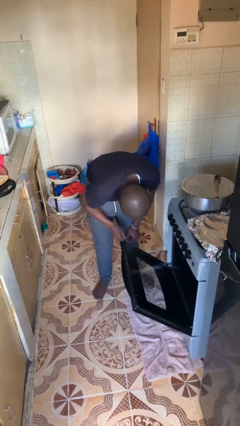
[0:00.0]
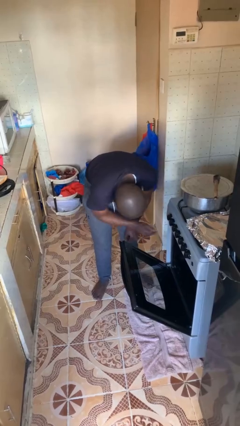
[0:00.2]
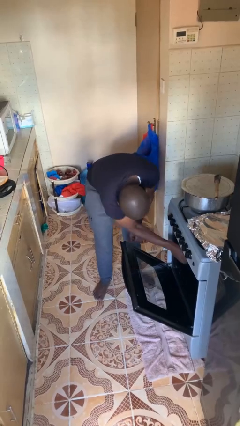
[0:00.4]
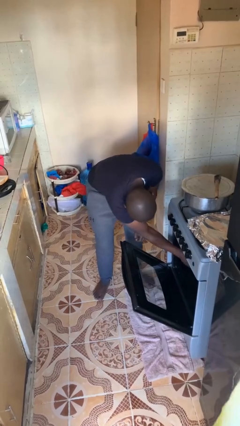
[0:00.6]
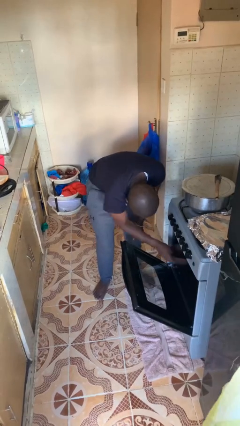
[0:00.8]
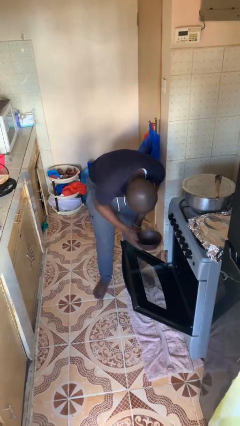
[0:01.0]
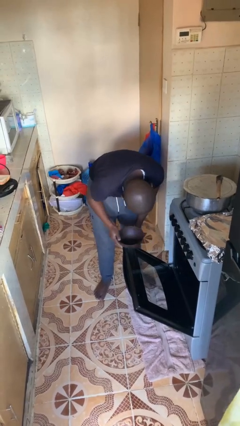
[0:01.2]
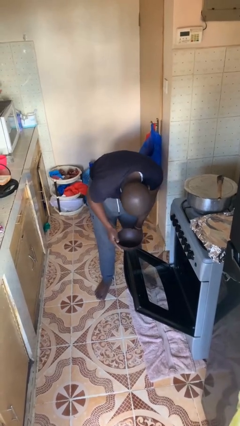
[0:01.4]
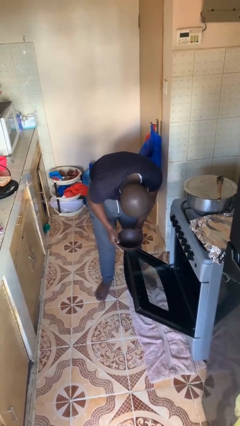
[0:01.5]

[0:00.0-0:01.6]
person takes object from oven

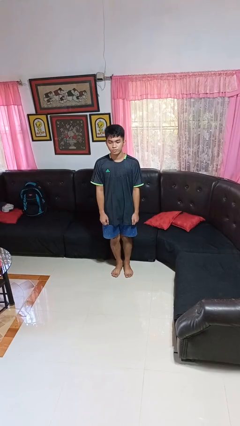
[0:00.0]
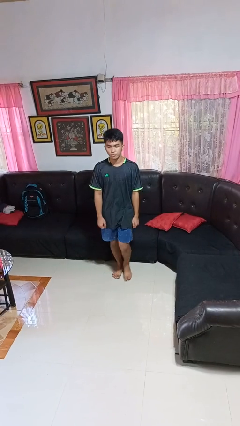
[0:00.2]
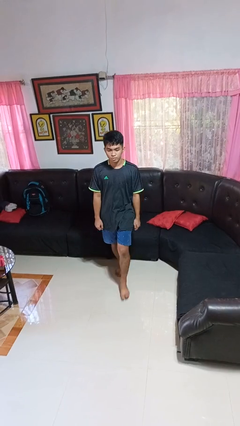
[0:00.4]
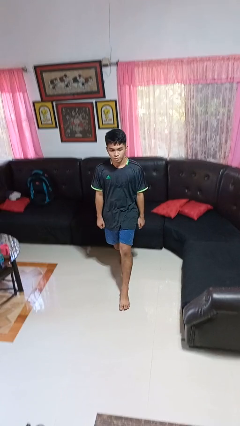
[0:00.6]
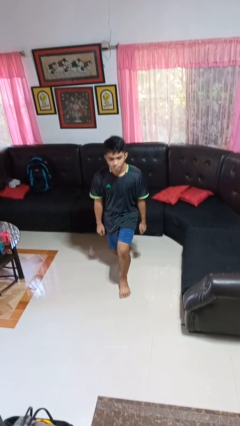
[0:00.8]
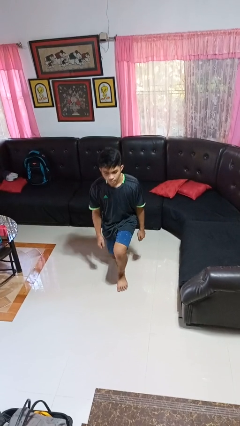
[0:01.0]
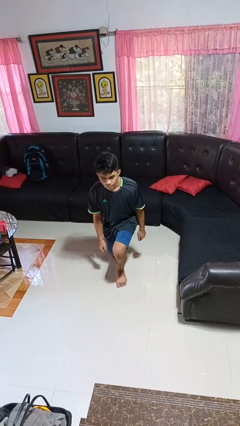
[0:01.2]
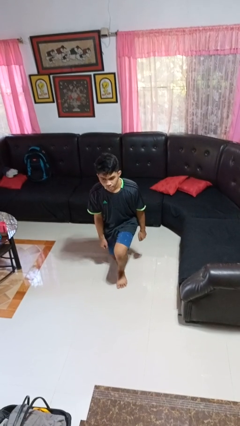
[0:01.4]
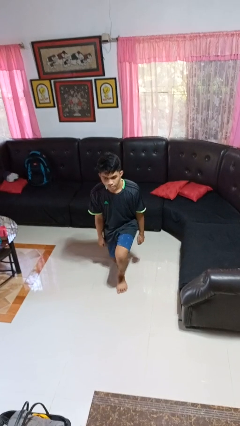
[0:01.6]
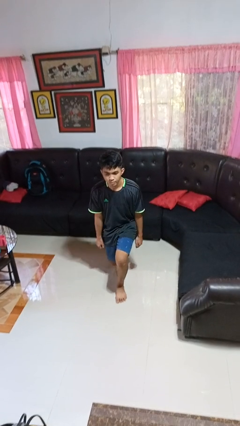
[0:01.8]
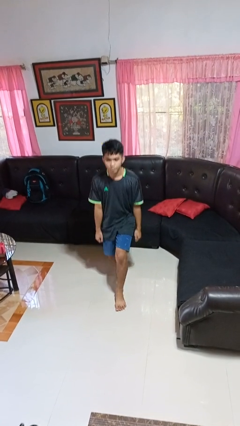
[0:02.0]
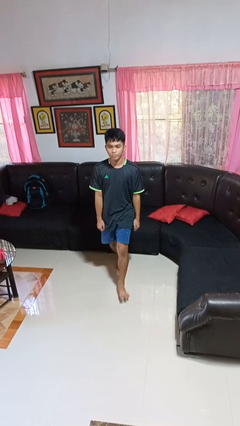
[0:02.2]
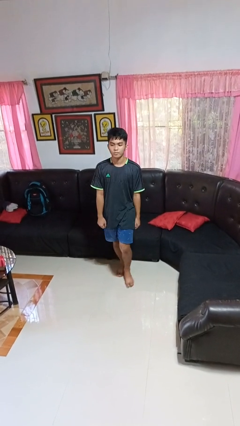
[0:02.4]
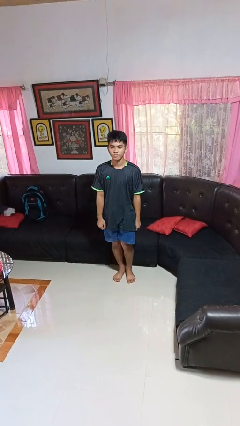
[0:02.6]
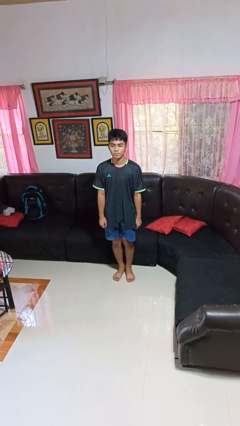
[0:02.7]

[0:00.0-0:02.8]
person exercises with lunges

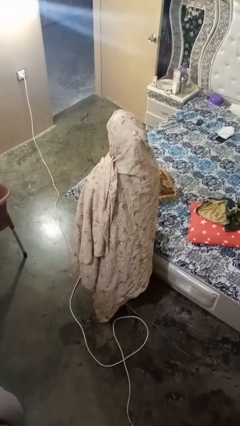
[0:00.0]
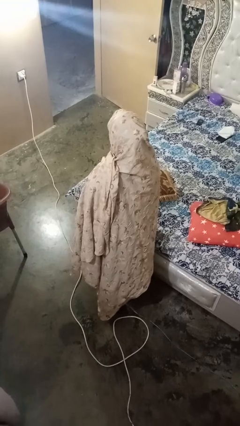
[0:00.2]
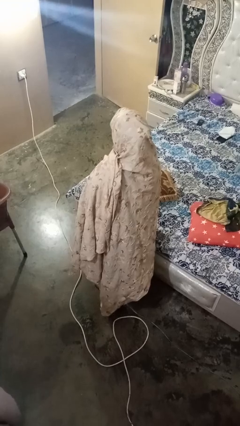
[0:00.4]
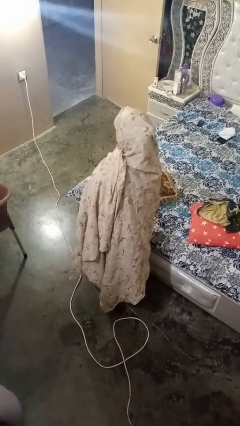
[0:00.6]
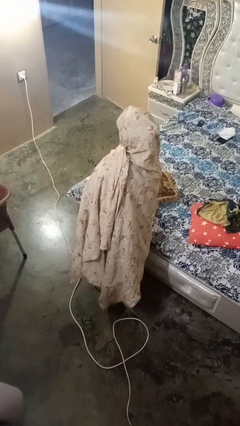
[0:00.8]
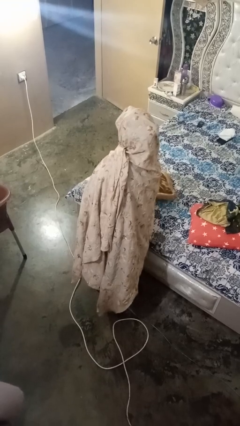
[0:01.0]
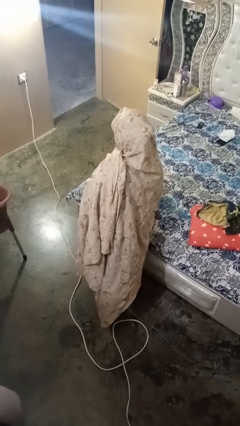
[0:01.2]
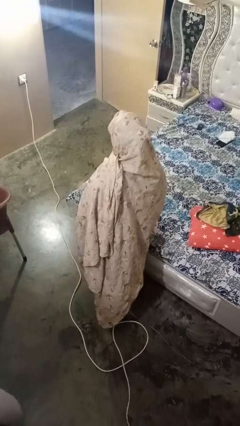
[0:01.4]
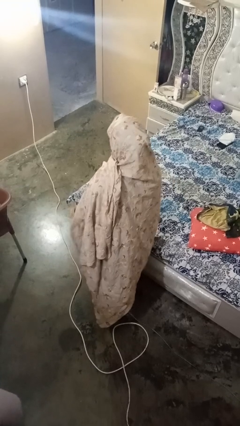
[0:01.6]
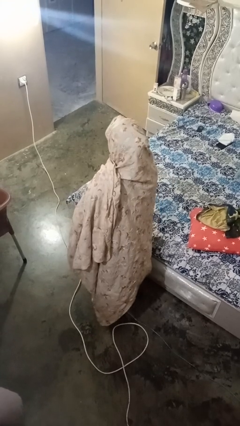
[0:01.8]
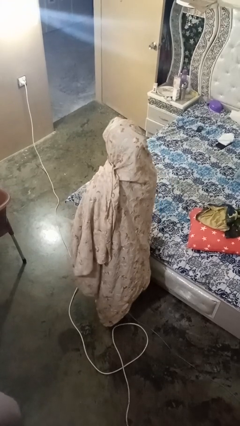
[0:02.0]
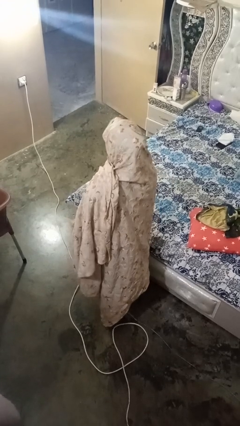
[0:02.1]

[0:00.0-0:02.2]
person picks up object from bed

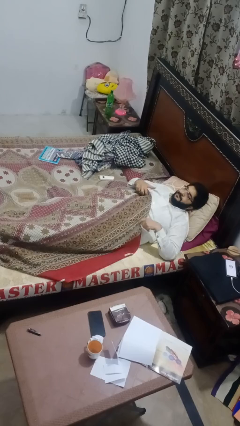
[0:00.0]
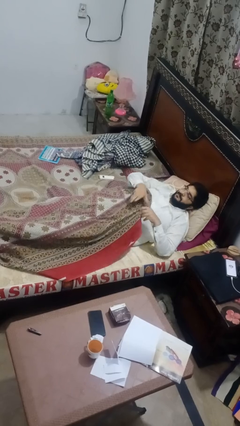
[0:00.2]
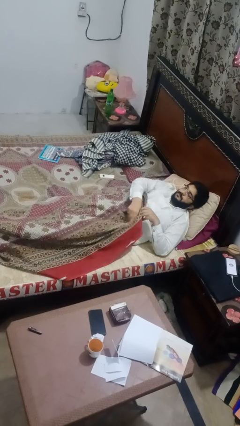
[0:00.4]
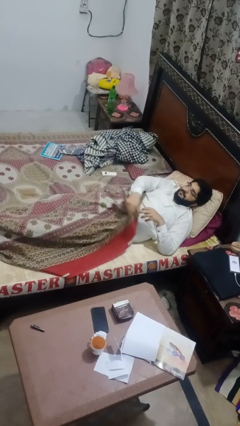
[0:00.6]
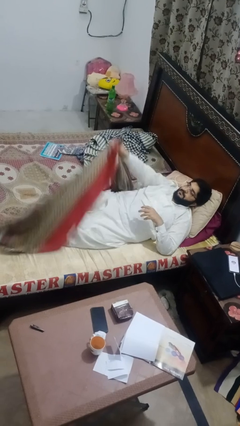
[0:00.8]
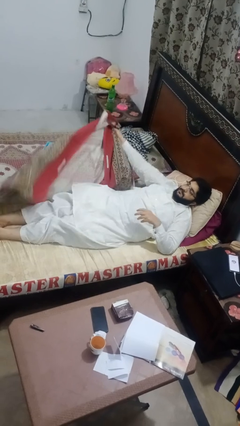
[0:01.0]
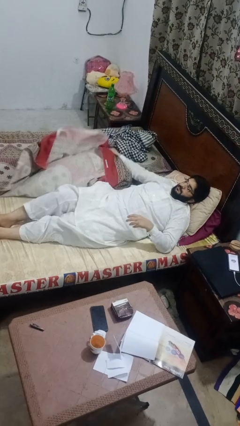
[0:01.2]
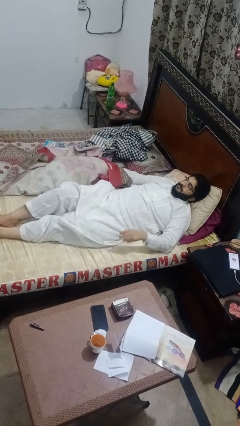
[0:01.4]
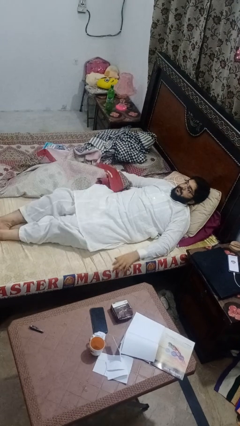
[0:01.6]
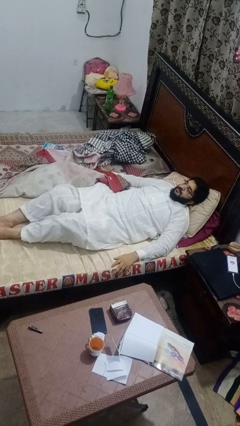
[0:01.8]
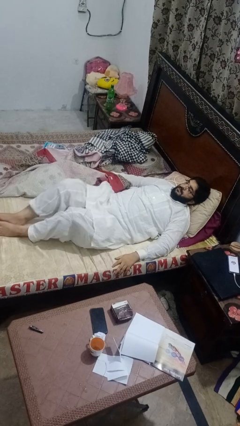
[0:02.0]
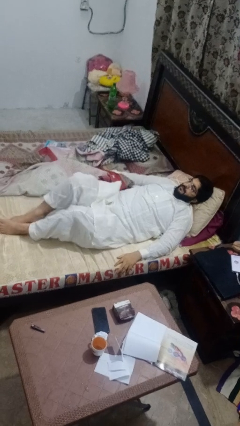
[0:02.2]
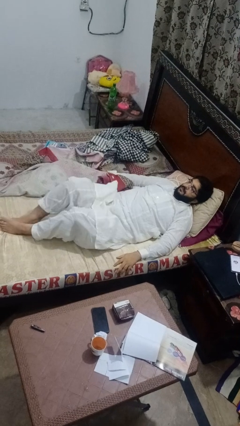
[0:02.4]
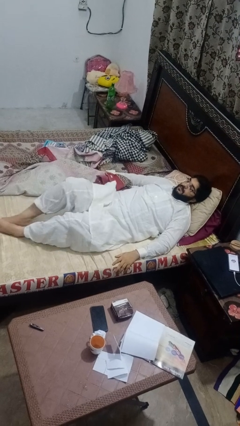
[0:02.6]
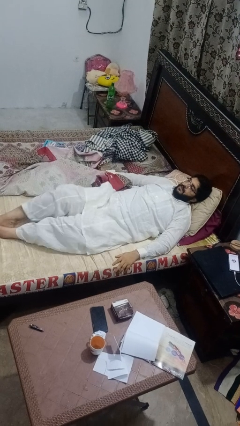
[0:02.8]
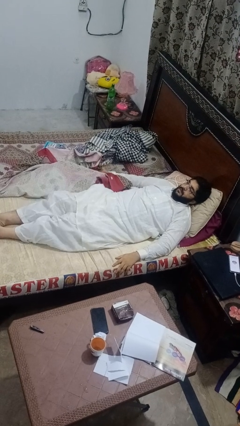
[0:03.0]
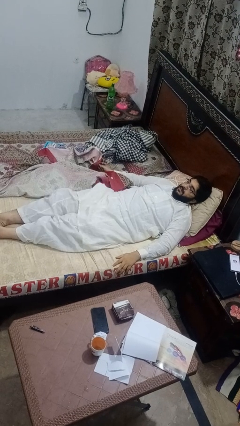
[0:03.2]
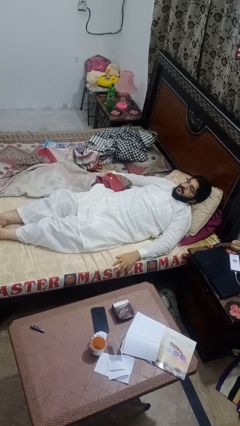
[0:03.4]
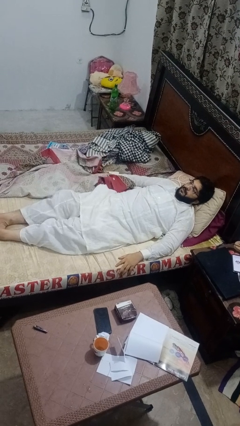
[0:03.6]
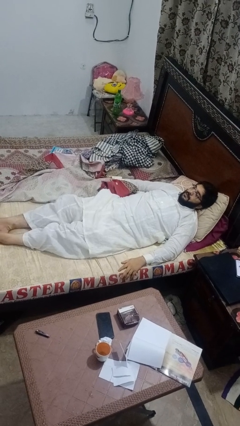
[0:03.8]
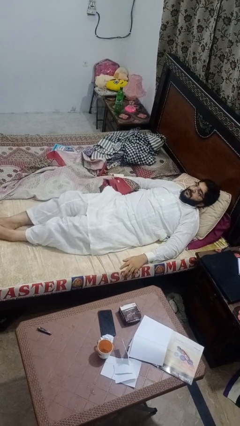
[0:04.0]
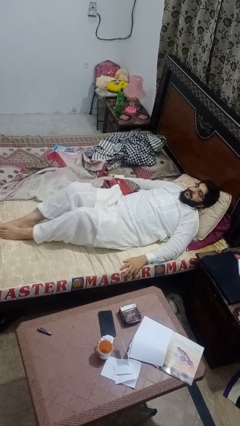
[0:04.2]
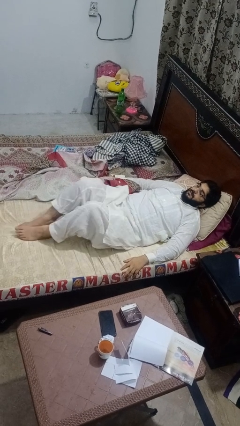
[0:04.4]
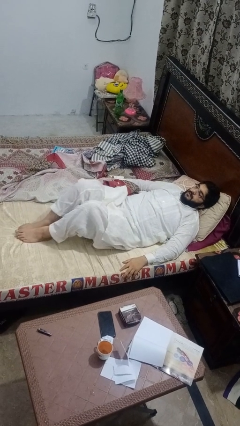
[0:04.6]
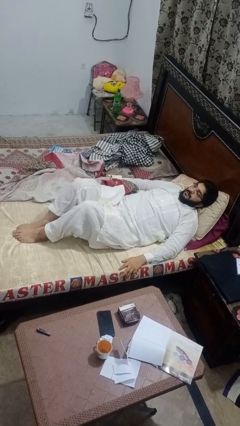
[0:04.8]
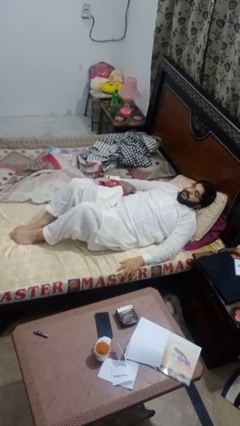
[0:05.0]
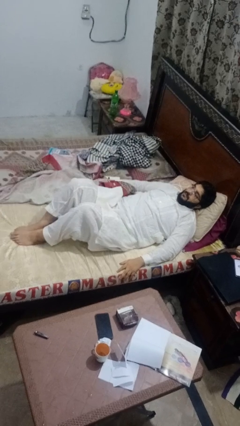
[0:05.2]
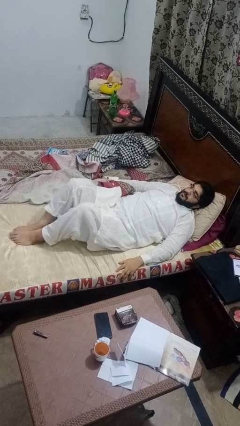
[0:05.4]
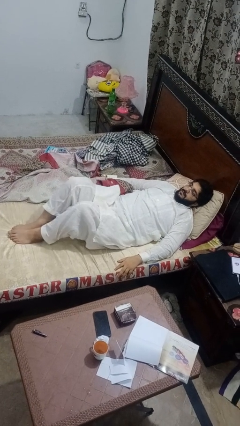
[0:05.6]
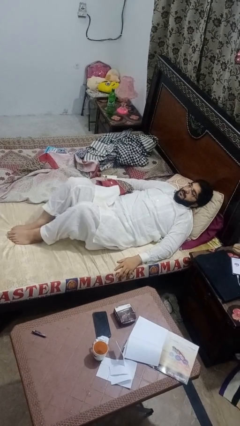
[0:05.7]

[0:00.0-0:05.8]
person uncovers with bedsheets

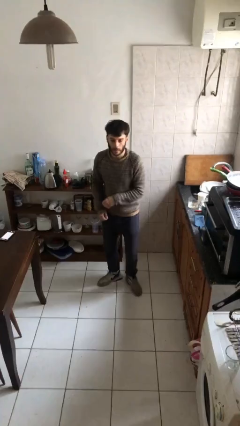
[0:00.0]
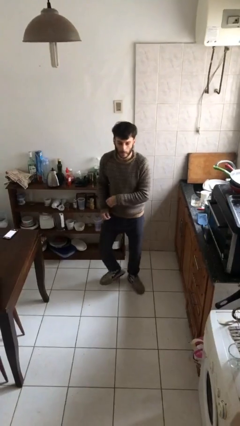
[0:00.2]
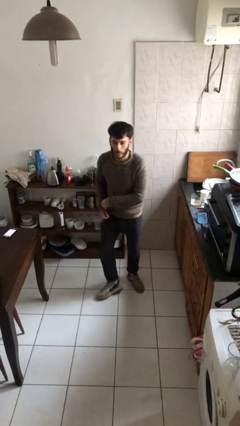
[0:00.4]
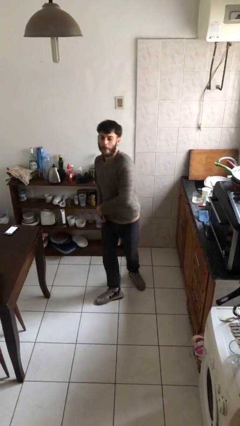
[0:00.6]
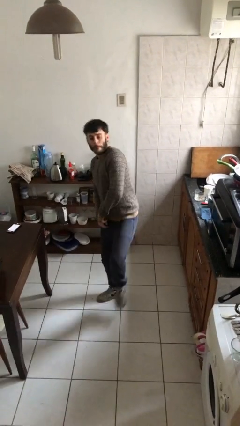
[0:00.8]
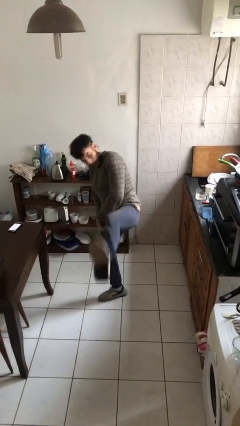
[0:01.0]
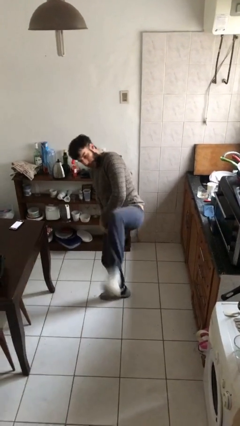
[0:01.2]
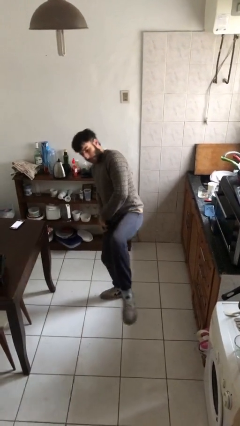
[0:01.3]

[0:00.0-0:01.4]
person karate kicks

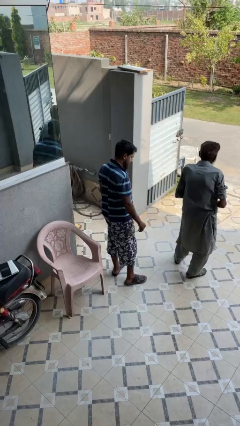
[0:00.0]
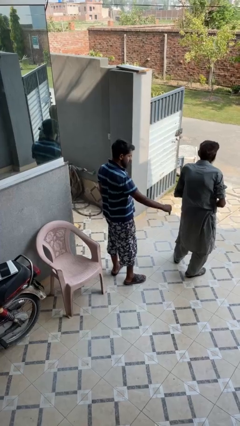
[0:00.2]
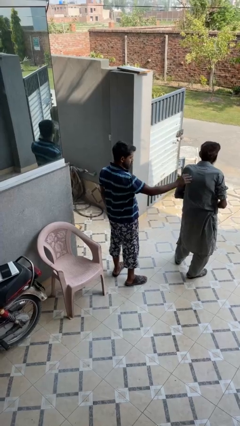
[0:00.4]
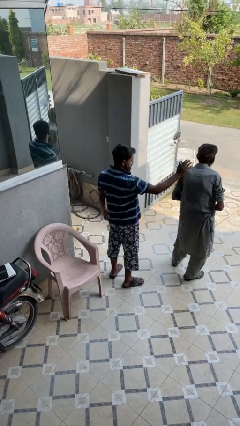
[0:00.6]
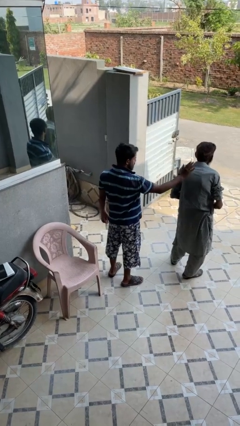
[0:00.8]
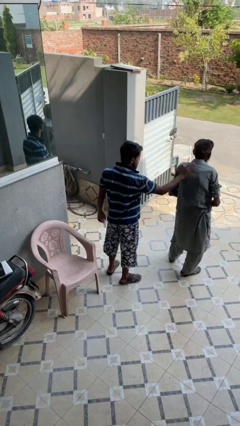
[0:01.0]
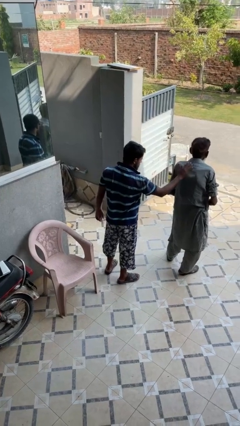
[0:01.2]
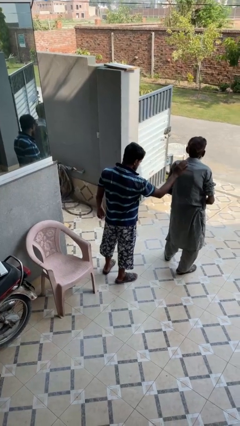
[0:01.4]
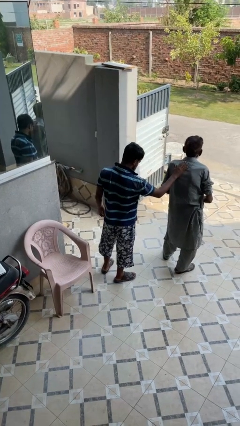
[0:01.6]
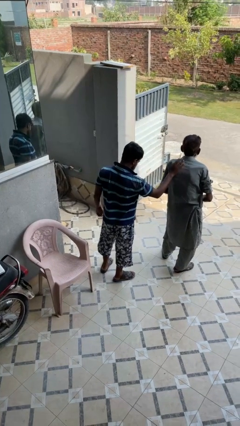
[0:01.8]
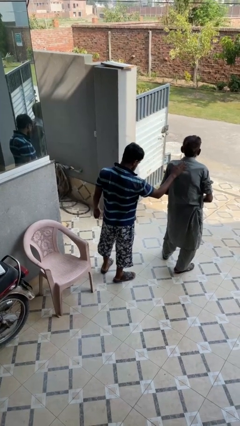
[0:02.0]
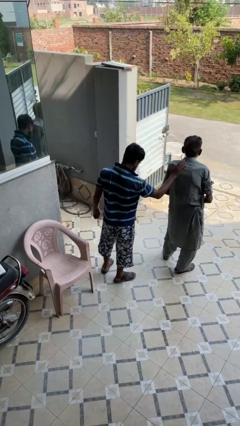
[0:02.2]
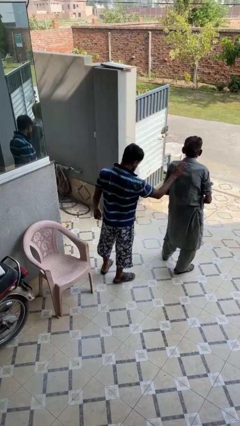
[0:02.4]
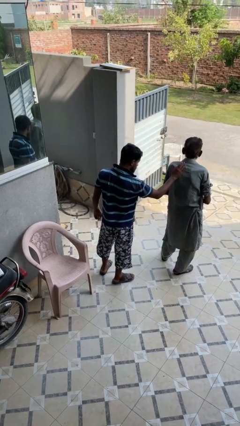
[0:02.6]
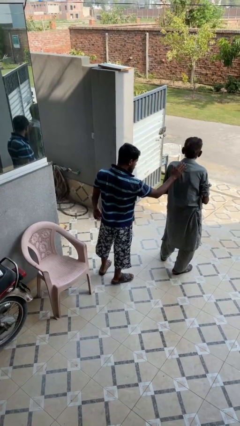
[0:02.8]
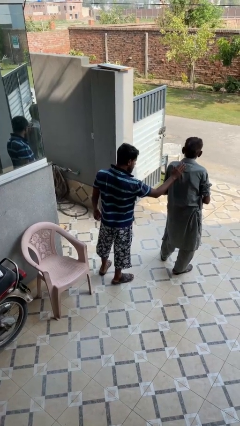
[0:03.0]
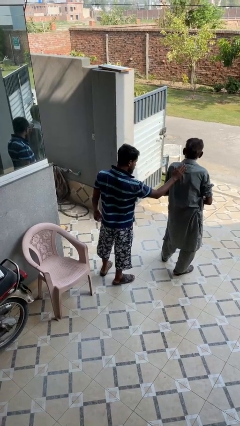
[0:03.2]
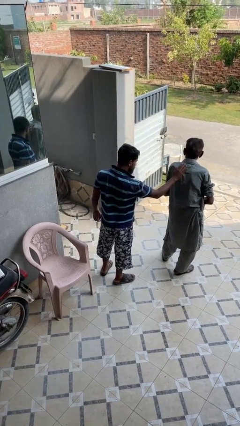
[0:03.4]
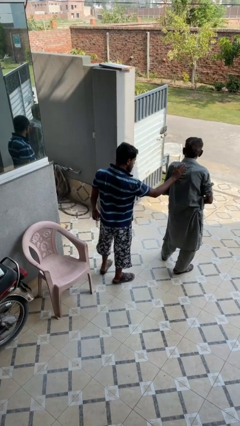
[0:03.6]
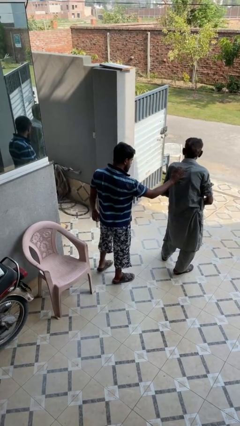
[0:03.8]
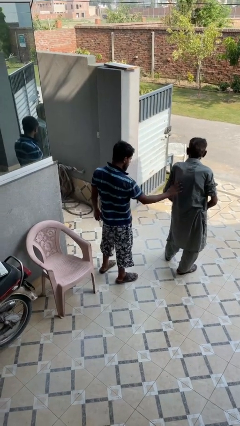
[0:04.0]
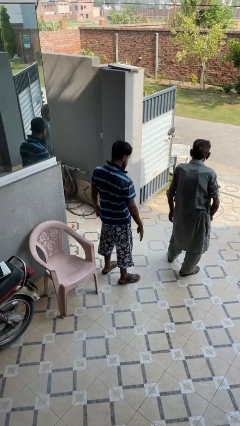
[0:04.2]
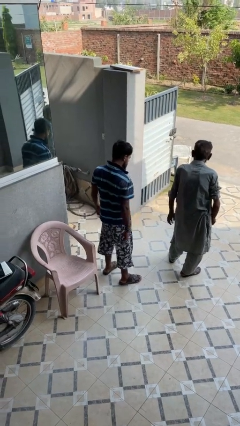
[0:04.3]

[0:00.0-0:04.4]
person touches back of person
